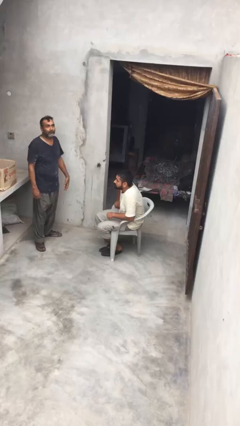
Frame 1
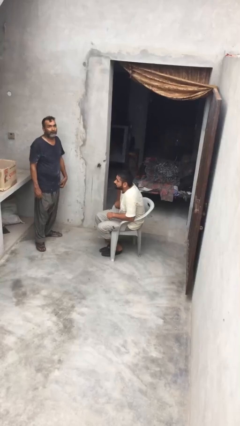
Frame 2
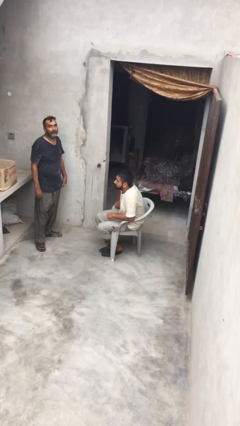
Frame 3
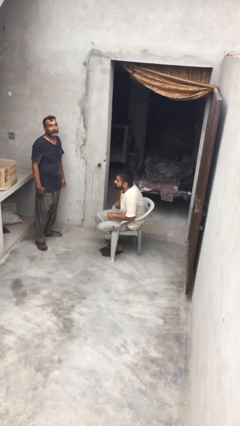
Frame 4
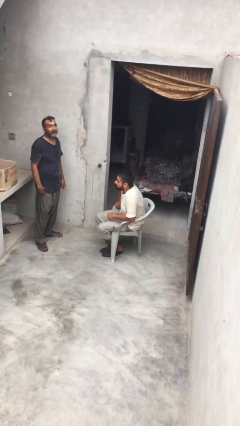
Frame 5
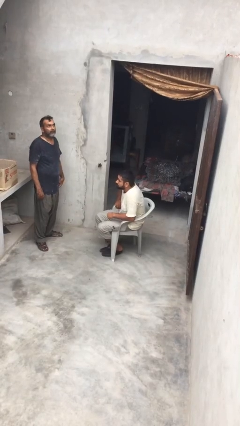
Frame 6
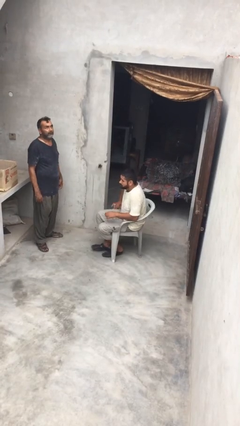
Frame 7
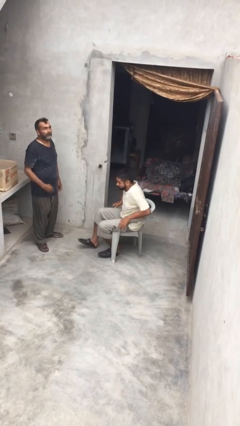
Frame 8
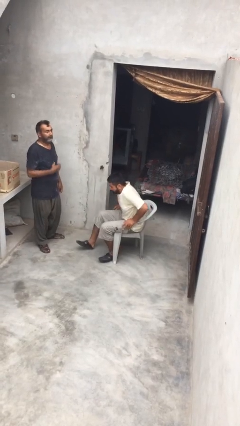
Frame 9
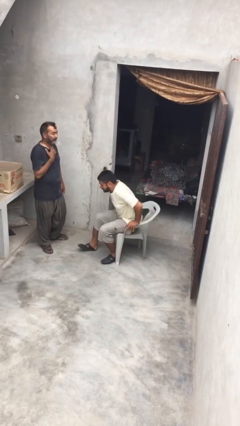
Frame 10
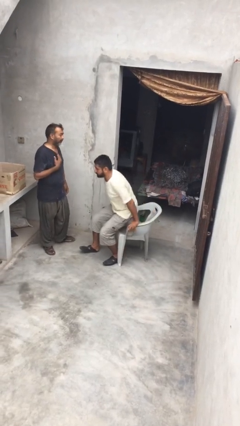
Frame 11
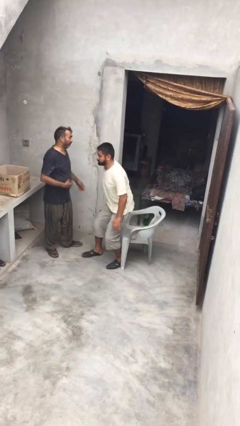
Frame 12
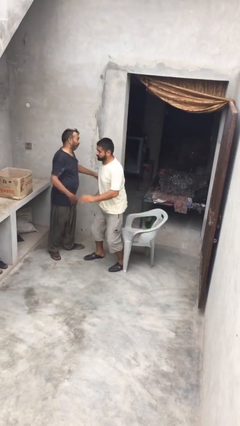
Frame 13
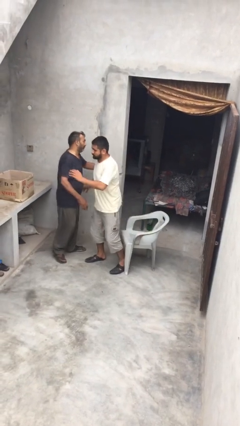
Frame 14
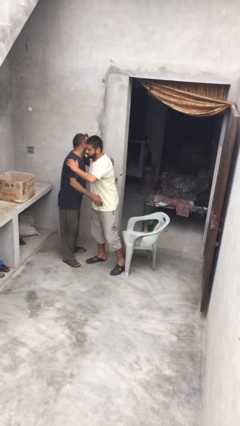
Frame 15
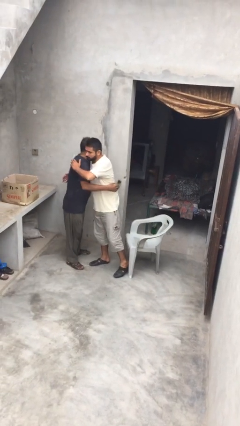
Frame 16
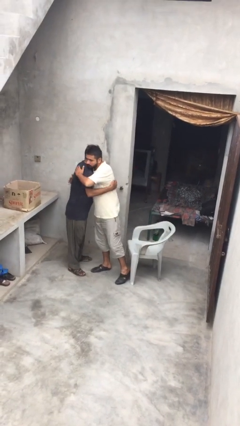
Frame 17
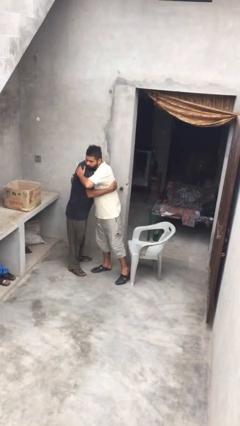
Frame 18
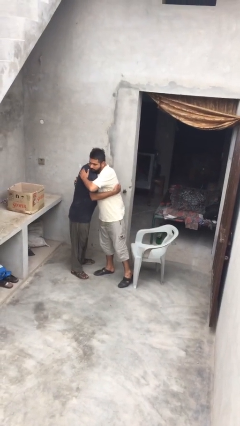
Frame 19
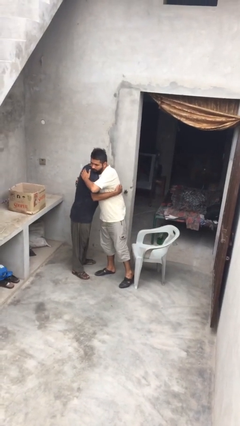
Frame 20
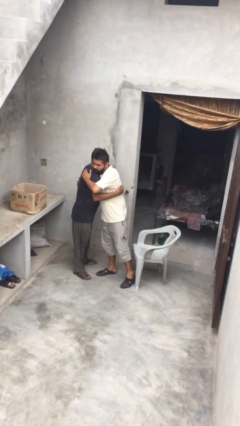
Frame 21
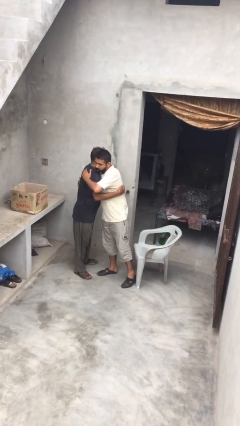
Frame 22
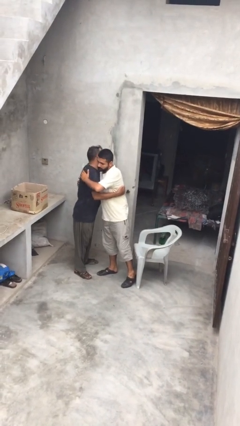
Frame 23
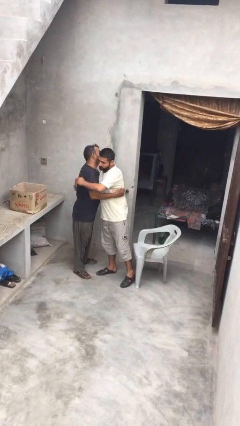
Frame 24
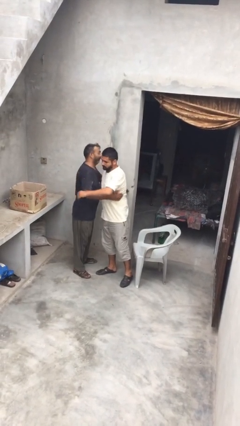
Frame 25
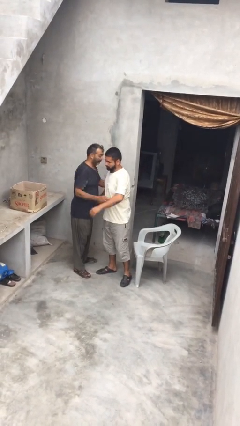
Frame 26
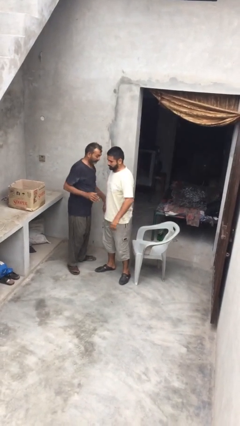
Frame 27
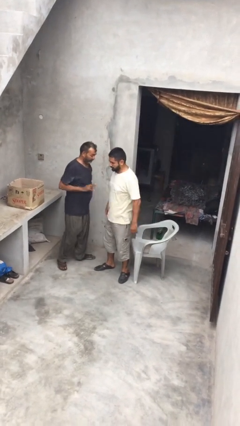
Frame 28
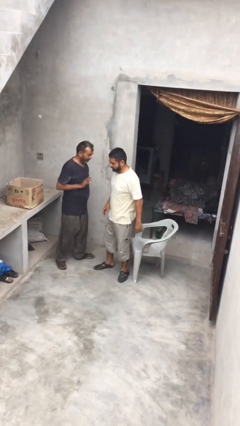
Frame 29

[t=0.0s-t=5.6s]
person embraces person

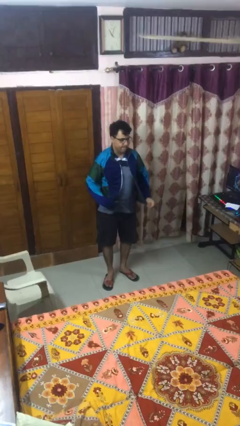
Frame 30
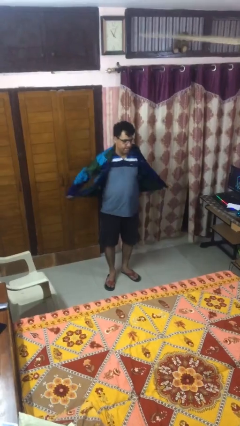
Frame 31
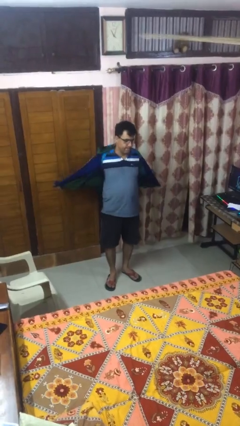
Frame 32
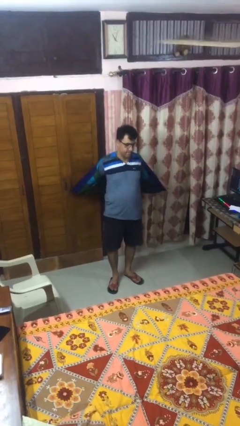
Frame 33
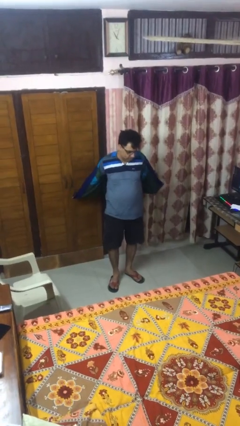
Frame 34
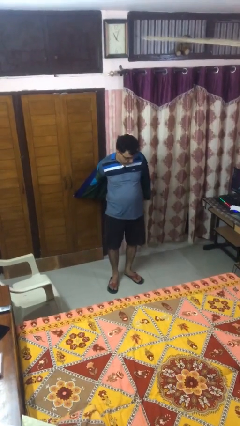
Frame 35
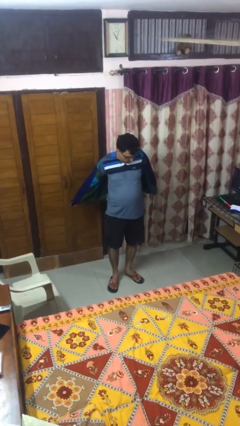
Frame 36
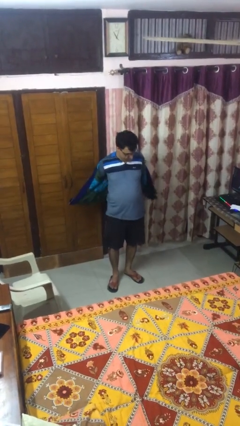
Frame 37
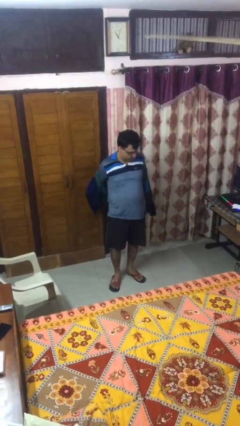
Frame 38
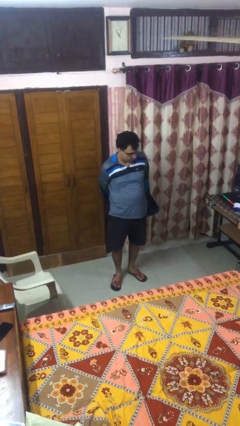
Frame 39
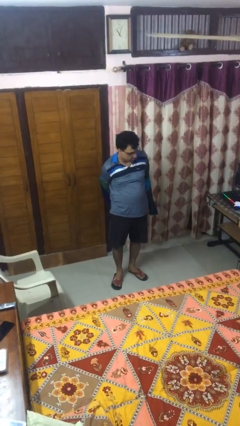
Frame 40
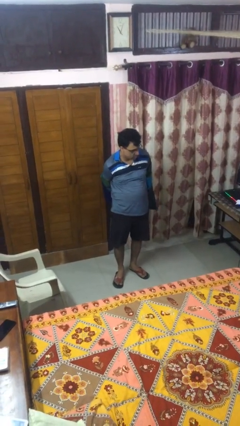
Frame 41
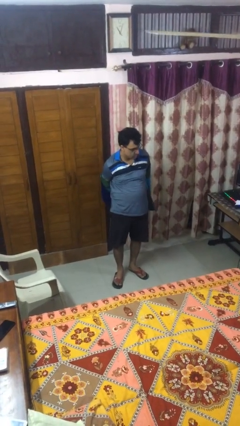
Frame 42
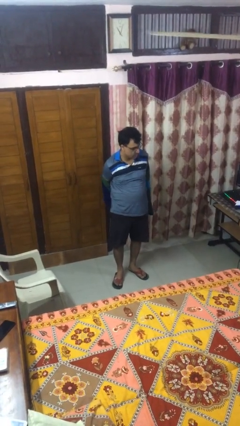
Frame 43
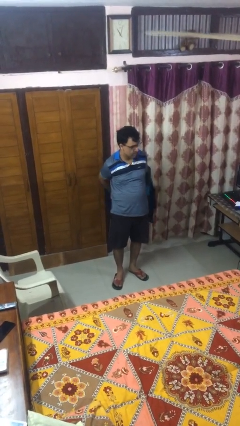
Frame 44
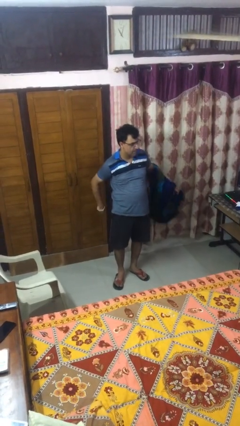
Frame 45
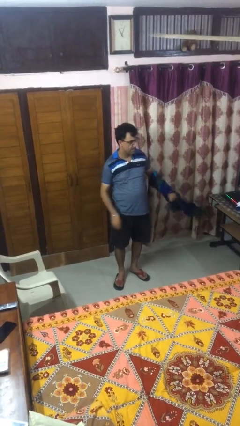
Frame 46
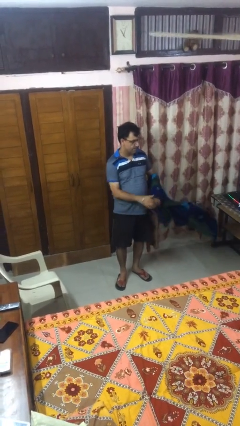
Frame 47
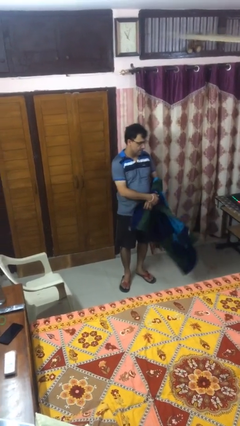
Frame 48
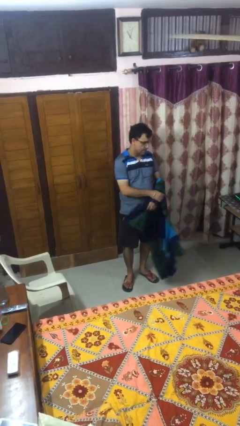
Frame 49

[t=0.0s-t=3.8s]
person takes off jacket

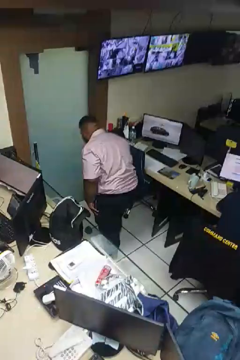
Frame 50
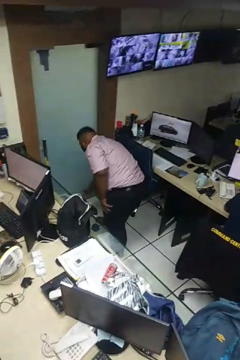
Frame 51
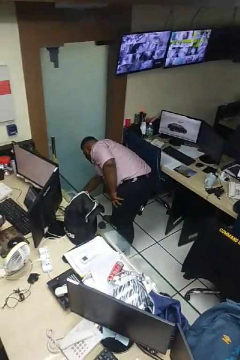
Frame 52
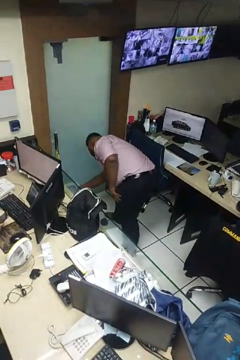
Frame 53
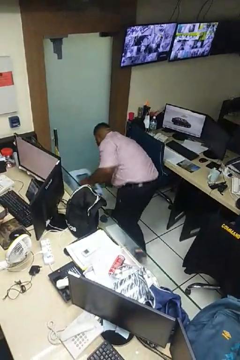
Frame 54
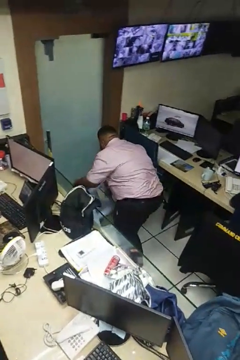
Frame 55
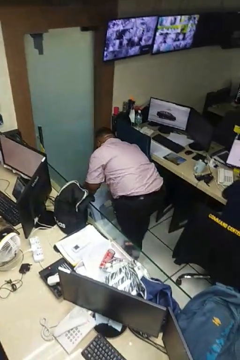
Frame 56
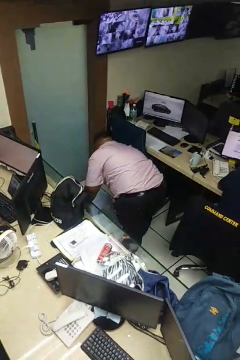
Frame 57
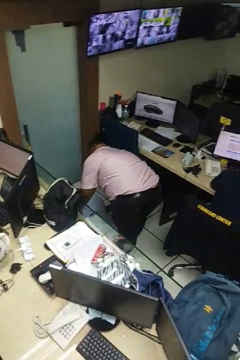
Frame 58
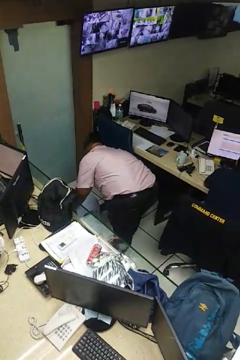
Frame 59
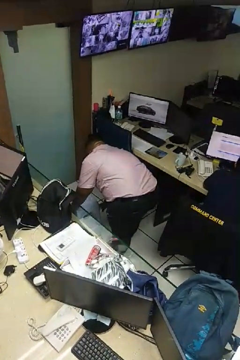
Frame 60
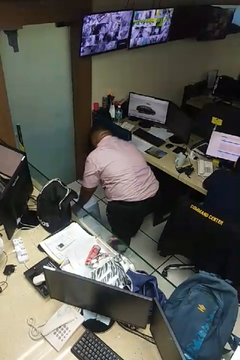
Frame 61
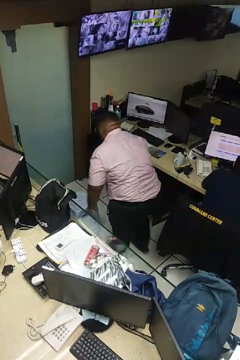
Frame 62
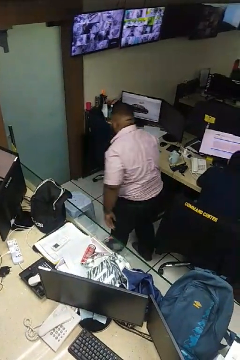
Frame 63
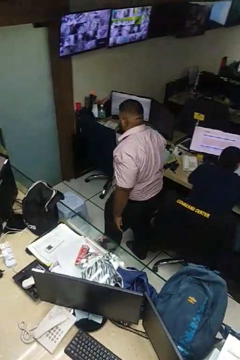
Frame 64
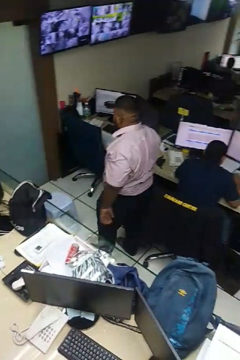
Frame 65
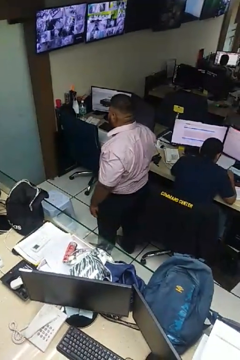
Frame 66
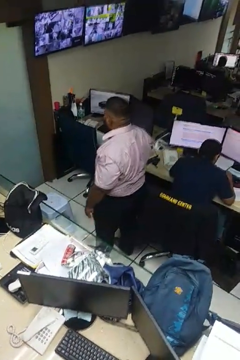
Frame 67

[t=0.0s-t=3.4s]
person sets upright furniture

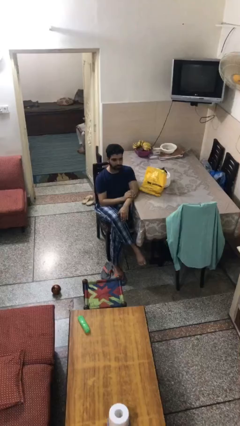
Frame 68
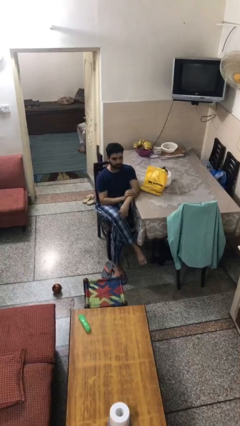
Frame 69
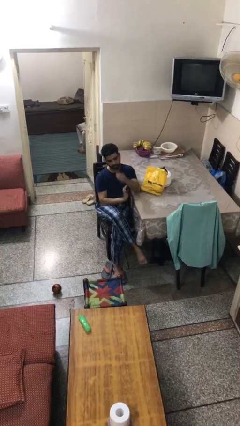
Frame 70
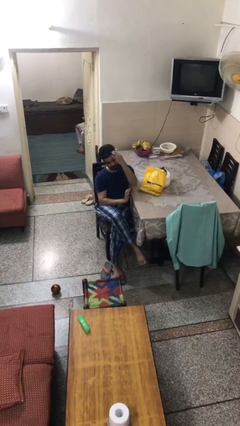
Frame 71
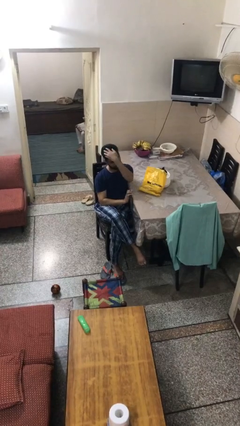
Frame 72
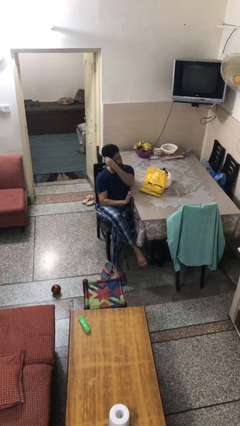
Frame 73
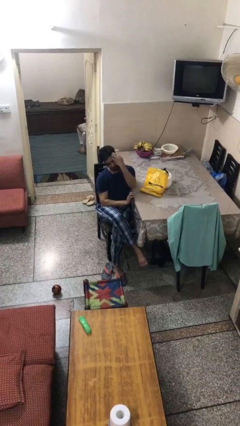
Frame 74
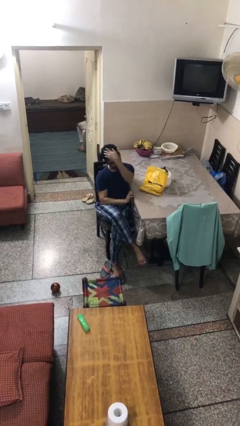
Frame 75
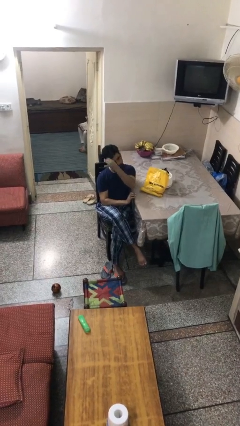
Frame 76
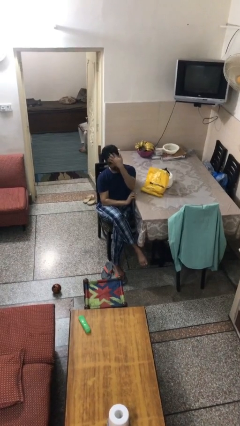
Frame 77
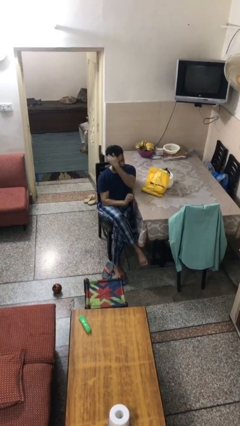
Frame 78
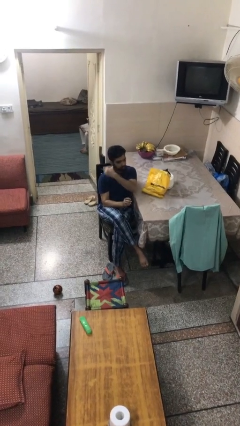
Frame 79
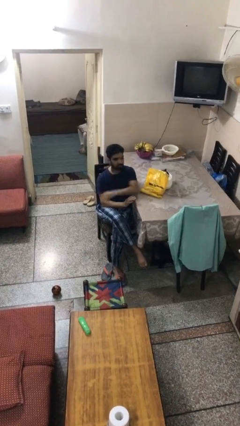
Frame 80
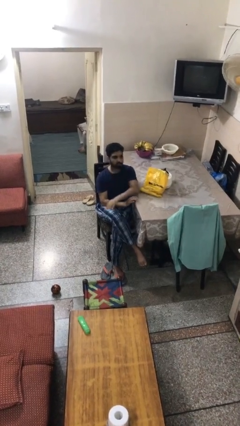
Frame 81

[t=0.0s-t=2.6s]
person strokes hair

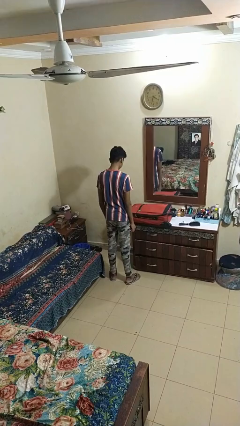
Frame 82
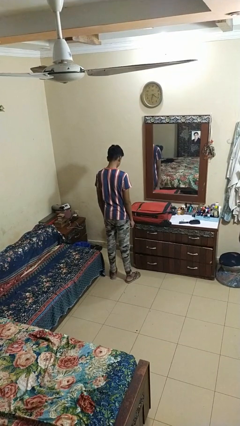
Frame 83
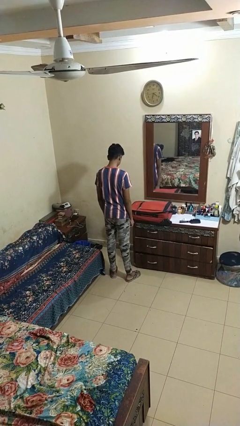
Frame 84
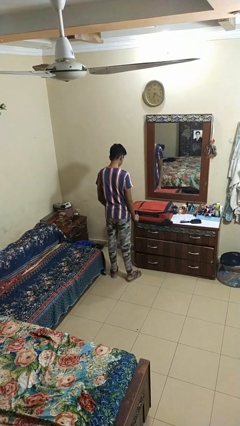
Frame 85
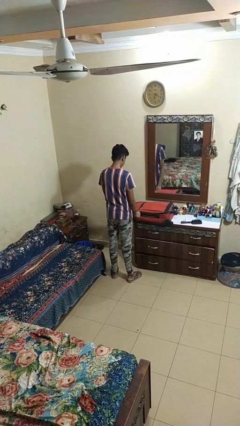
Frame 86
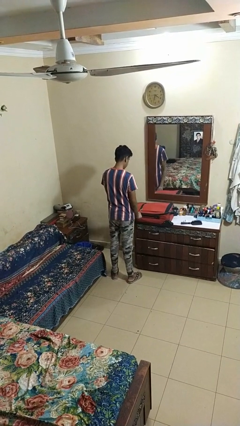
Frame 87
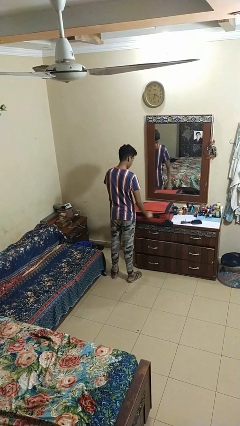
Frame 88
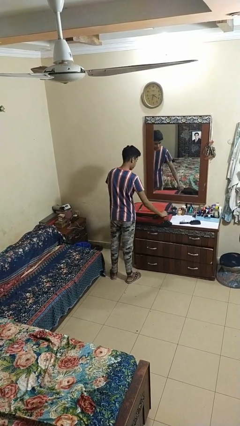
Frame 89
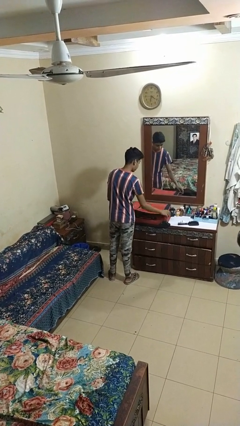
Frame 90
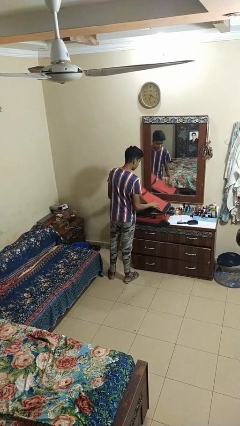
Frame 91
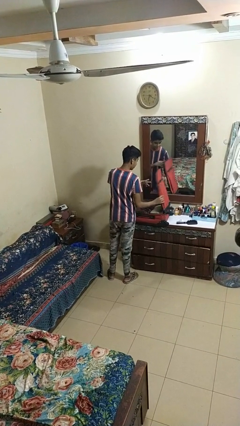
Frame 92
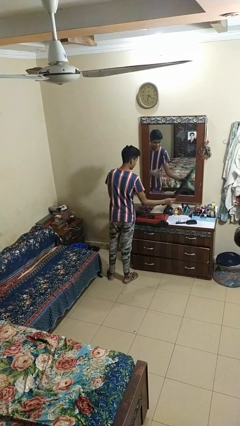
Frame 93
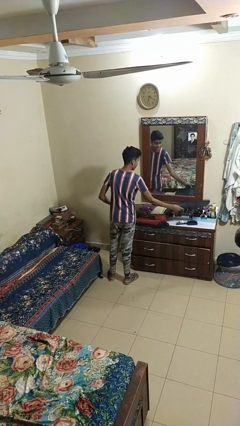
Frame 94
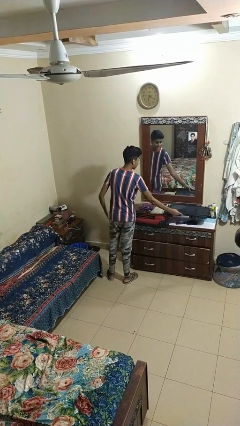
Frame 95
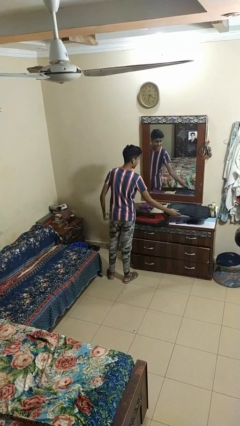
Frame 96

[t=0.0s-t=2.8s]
person opens suitcase
